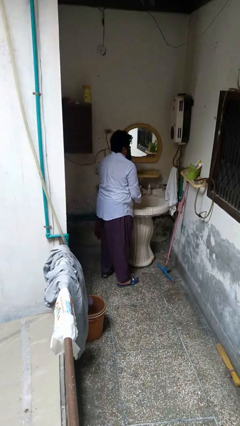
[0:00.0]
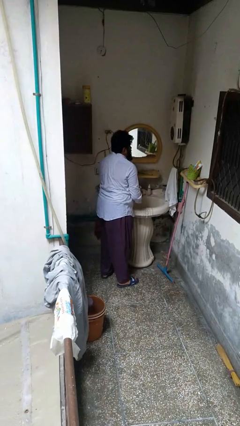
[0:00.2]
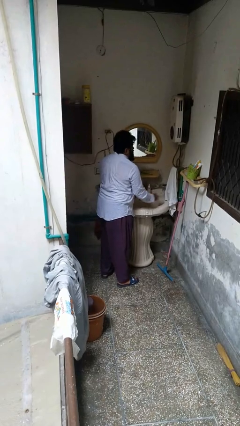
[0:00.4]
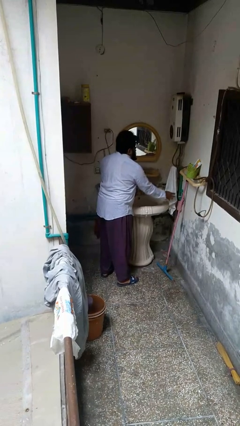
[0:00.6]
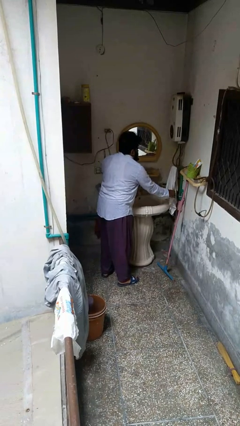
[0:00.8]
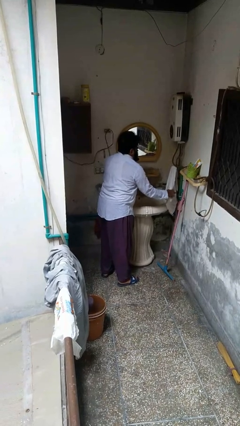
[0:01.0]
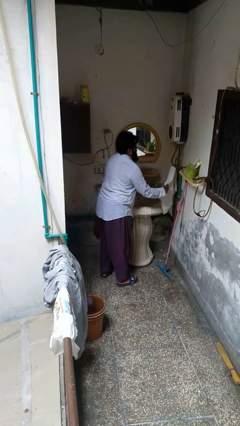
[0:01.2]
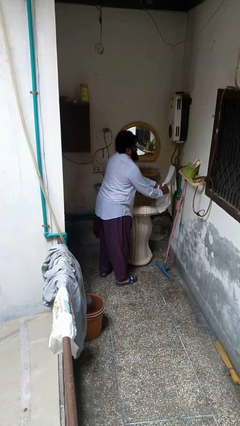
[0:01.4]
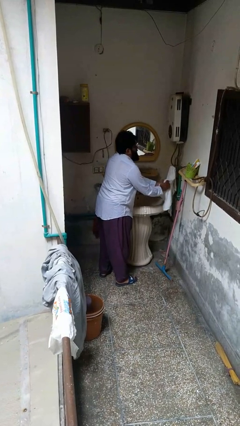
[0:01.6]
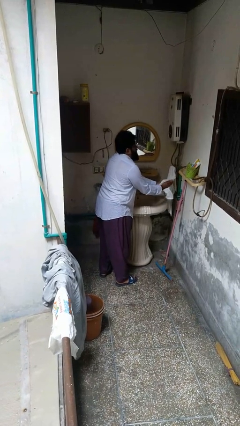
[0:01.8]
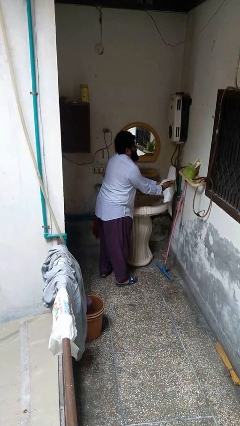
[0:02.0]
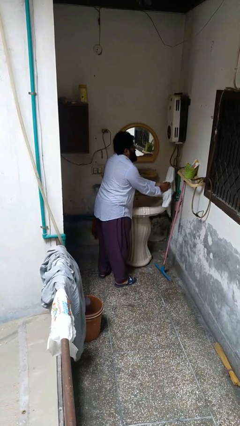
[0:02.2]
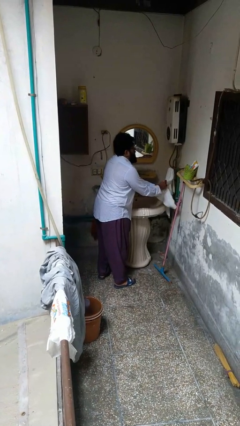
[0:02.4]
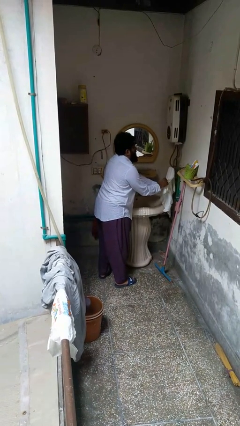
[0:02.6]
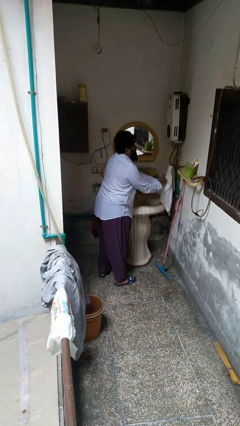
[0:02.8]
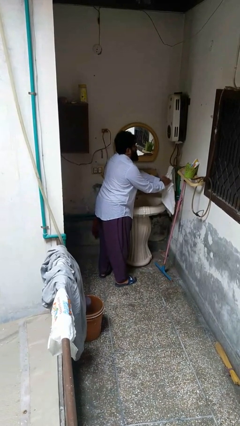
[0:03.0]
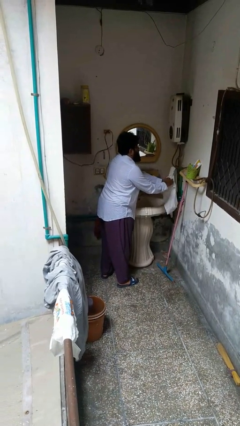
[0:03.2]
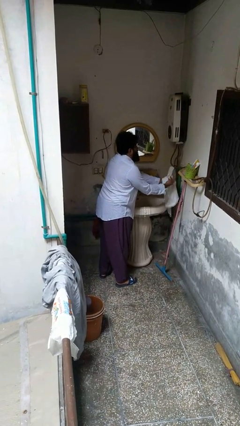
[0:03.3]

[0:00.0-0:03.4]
person dries hands with towel

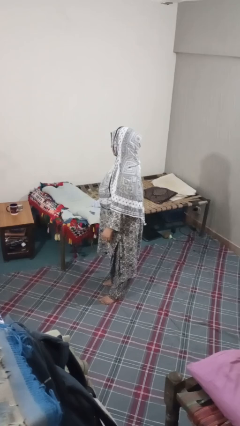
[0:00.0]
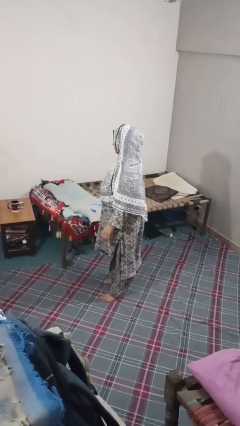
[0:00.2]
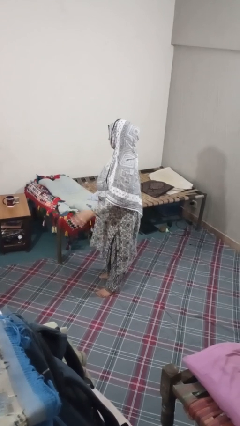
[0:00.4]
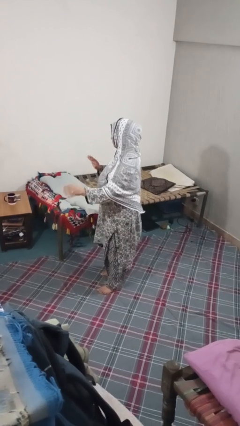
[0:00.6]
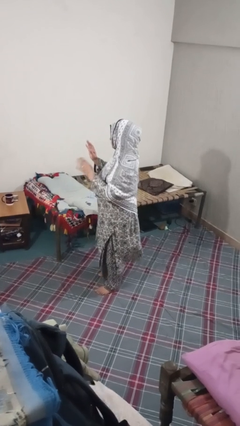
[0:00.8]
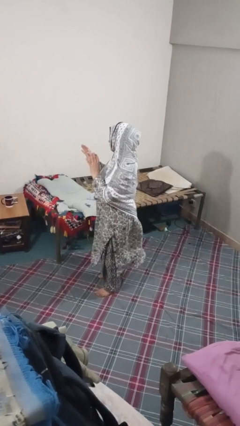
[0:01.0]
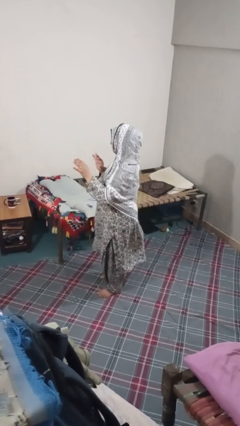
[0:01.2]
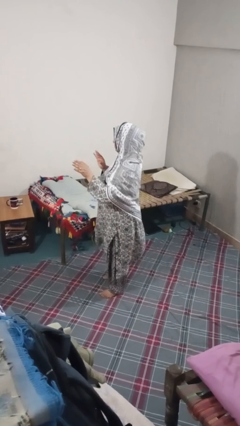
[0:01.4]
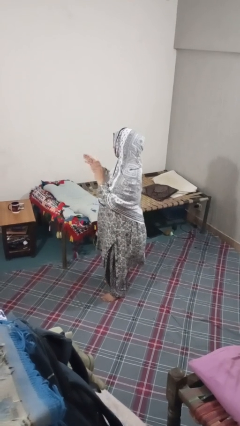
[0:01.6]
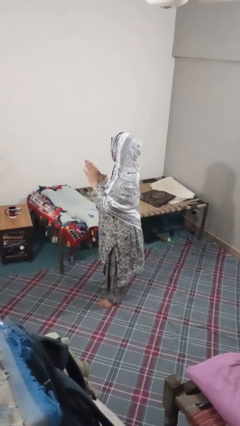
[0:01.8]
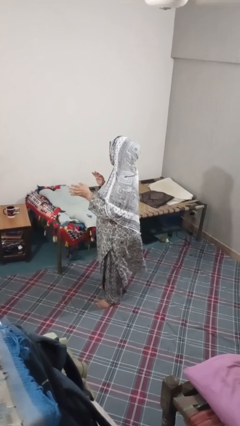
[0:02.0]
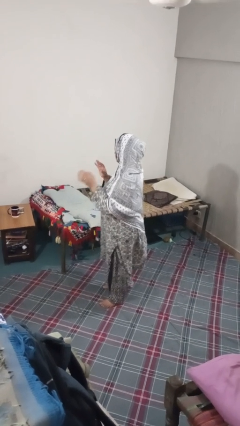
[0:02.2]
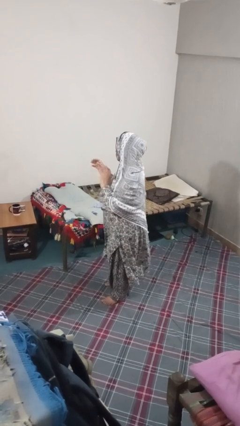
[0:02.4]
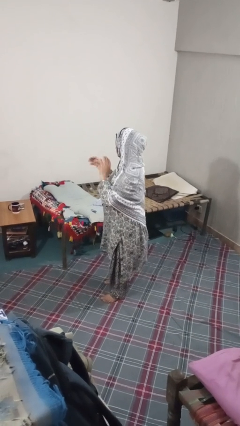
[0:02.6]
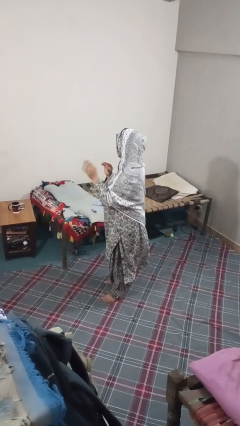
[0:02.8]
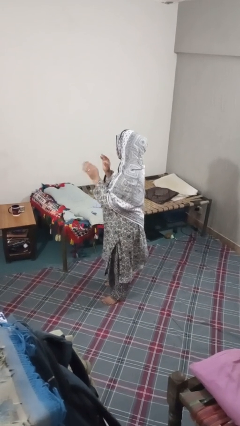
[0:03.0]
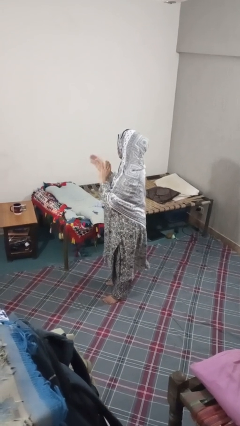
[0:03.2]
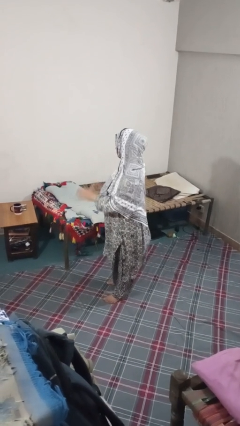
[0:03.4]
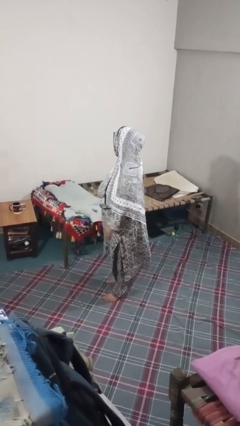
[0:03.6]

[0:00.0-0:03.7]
person dances in place

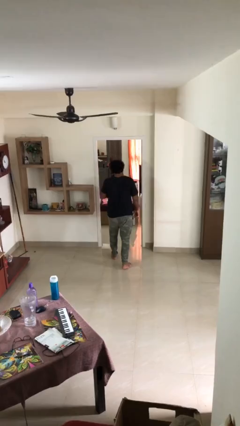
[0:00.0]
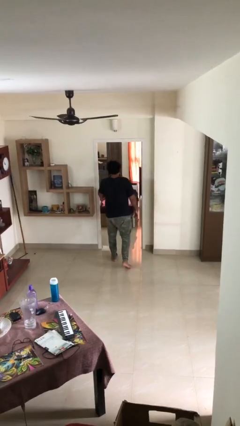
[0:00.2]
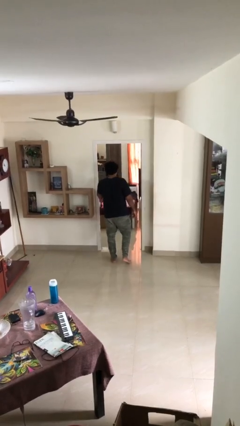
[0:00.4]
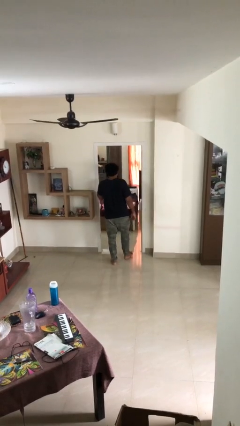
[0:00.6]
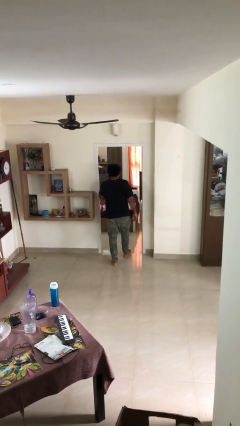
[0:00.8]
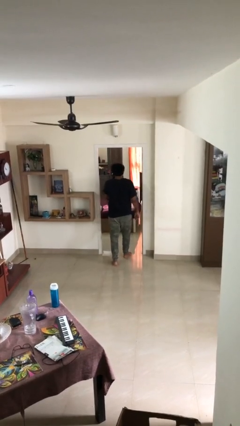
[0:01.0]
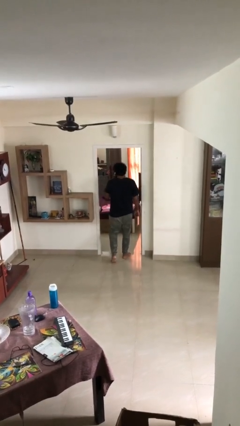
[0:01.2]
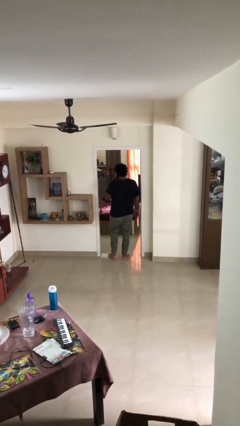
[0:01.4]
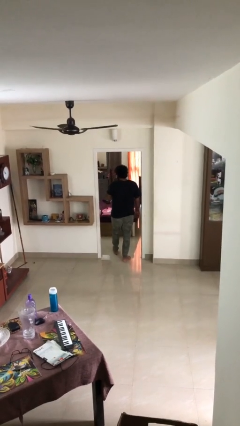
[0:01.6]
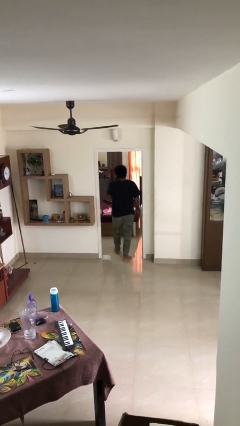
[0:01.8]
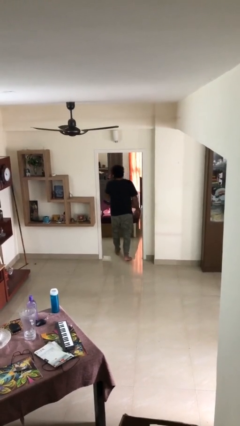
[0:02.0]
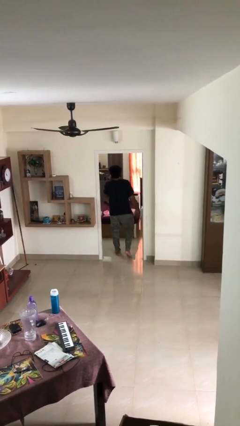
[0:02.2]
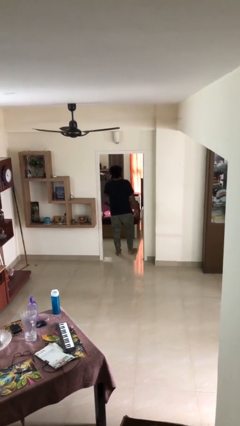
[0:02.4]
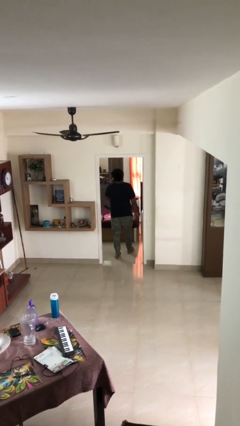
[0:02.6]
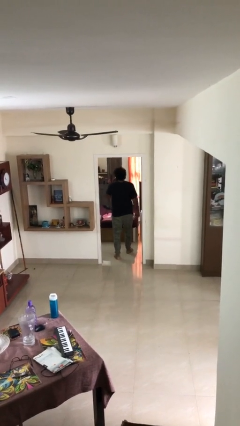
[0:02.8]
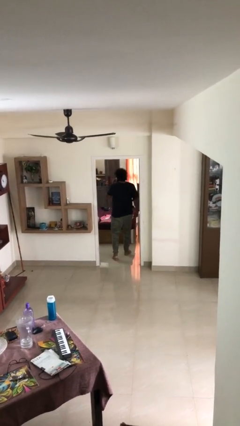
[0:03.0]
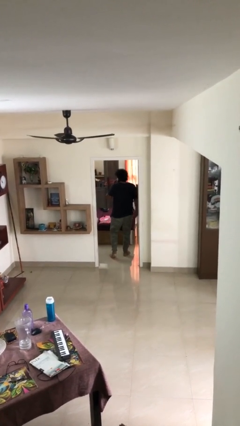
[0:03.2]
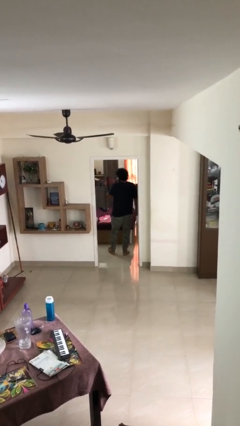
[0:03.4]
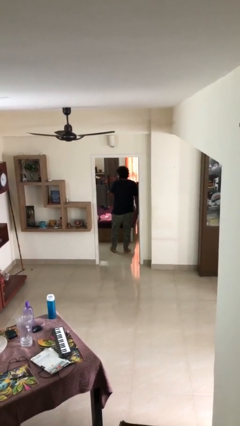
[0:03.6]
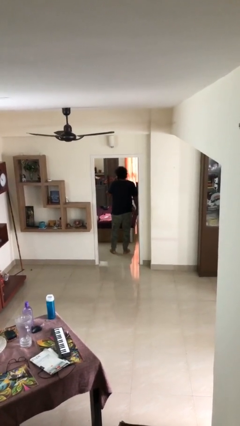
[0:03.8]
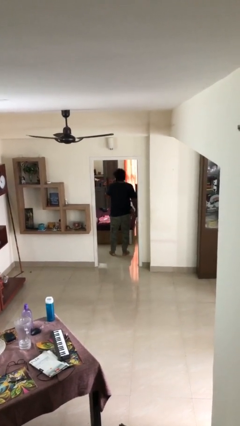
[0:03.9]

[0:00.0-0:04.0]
person exits scene through structure

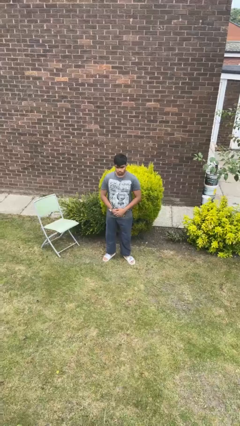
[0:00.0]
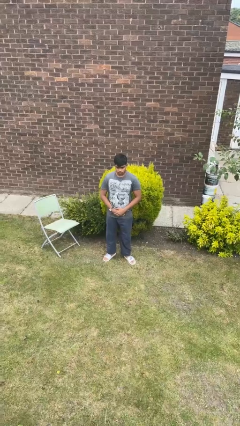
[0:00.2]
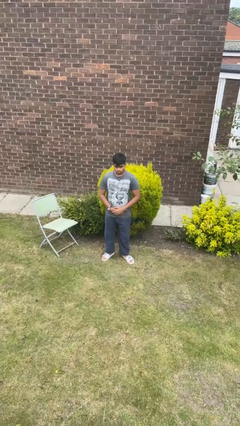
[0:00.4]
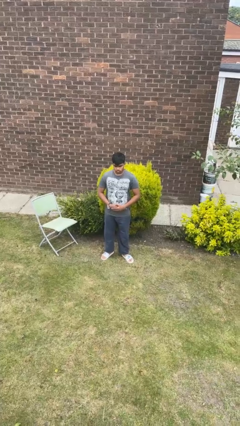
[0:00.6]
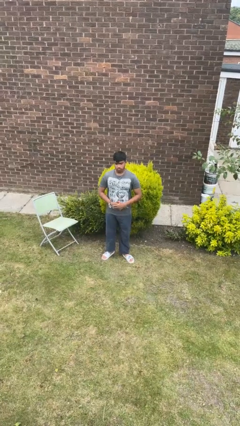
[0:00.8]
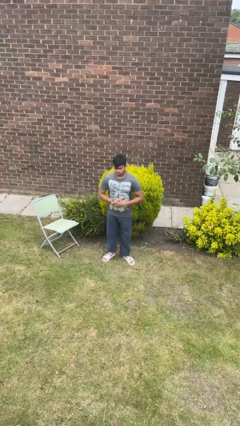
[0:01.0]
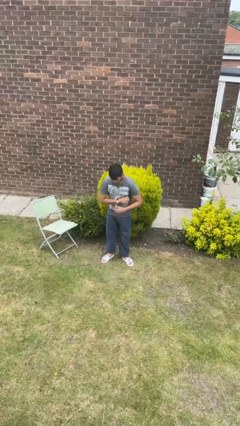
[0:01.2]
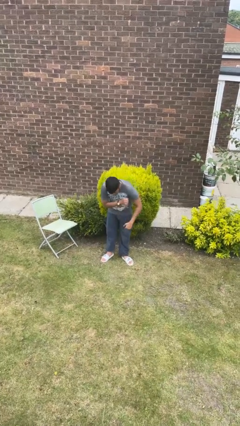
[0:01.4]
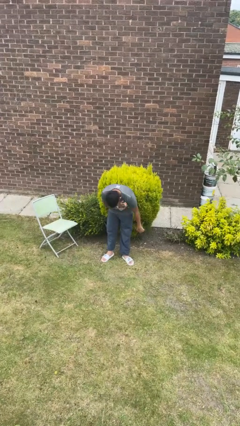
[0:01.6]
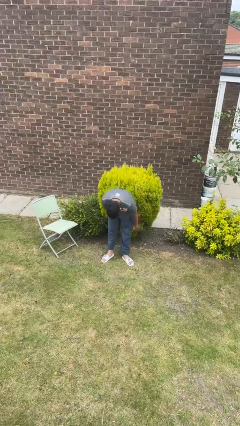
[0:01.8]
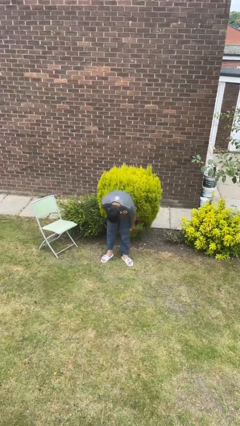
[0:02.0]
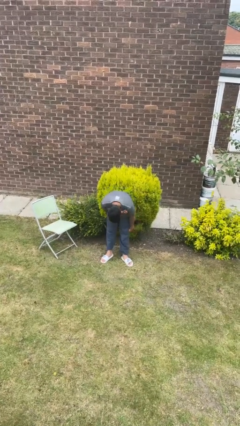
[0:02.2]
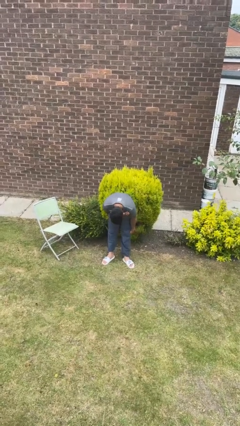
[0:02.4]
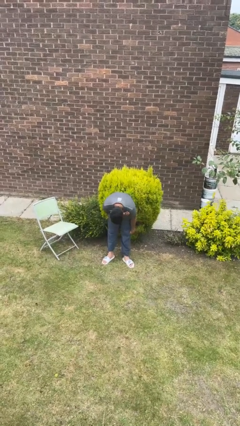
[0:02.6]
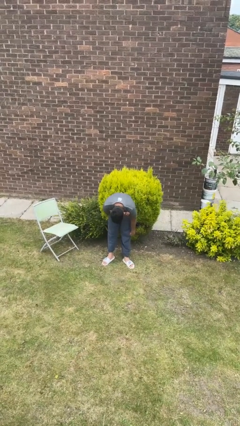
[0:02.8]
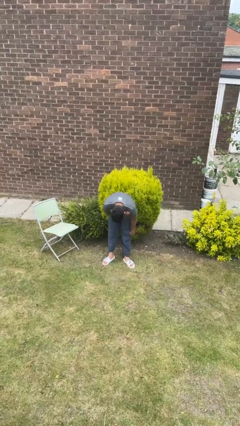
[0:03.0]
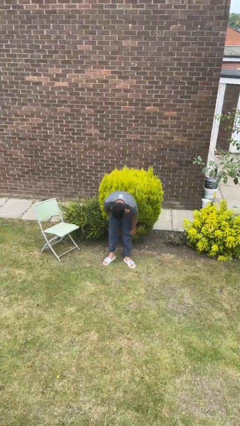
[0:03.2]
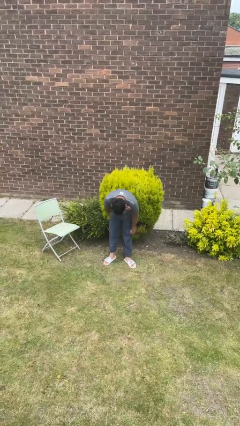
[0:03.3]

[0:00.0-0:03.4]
person bows

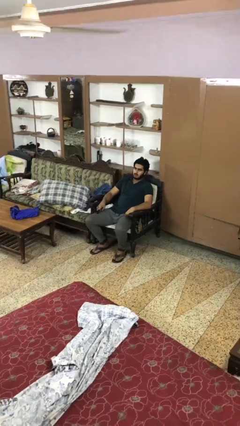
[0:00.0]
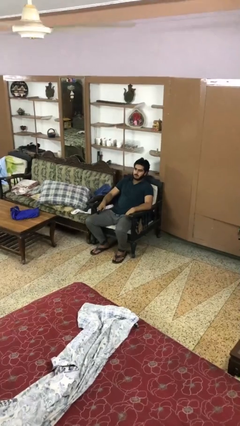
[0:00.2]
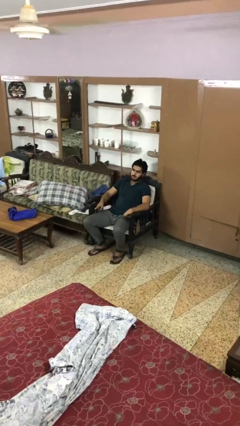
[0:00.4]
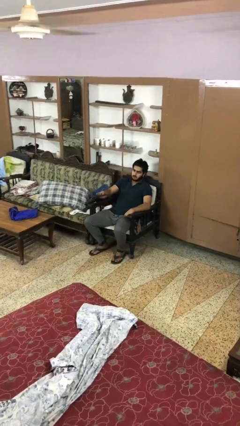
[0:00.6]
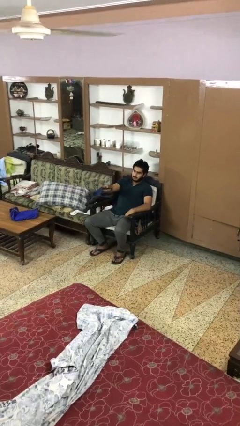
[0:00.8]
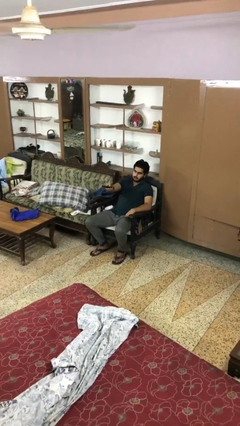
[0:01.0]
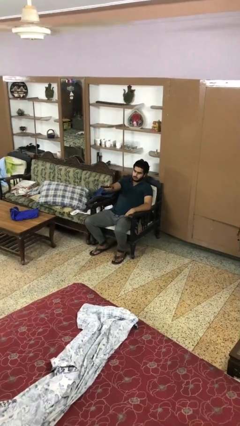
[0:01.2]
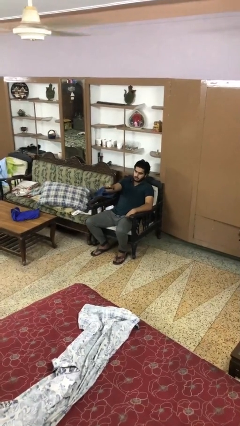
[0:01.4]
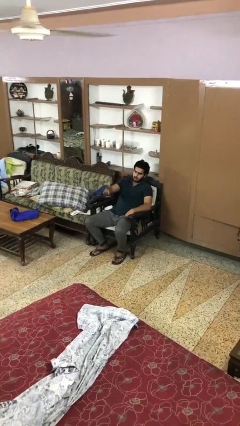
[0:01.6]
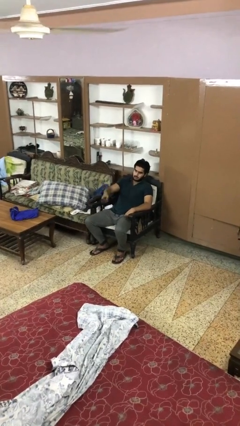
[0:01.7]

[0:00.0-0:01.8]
person uses television remote

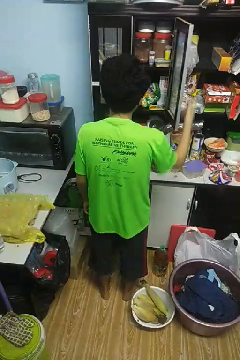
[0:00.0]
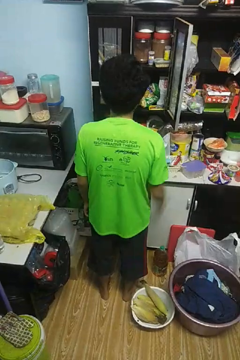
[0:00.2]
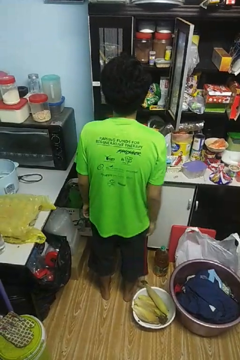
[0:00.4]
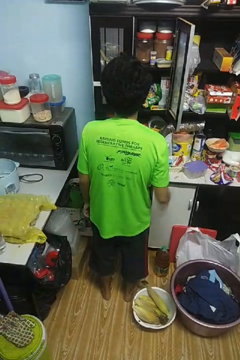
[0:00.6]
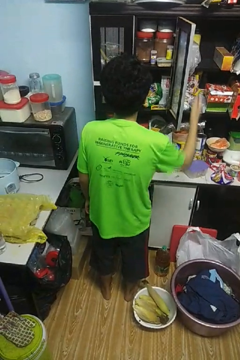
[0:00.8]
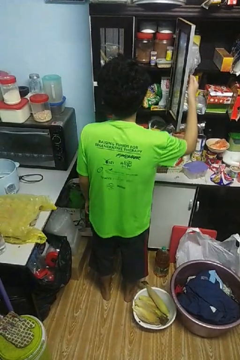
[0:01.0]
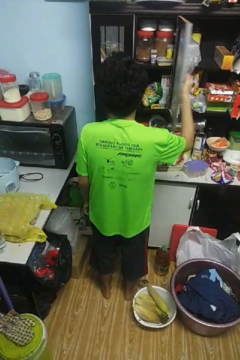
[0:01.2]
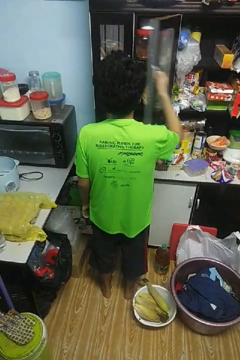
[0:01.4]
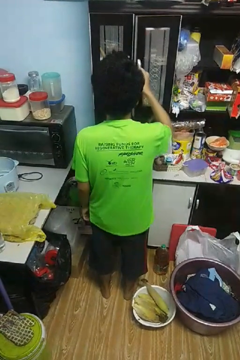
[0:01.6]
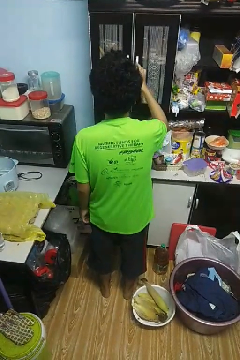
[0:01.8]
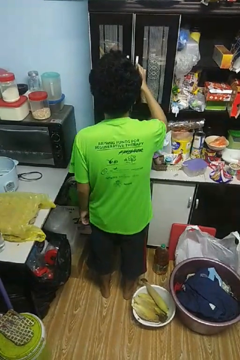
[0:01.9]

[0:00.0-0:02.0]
person closes cabinet
